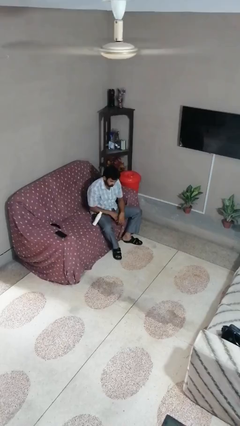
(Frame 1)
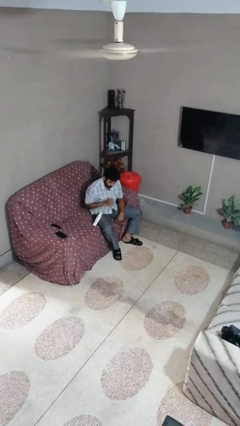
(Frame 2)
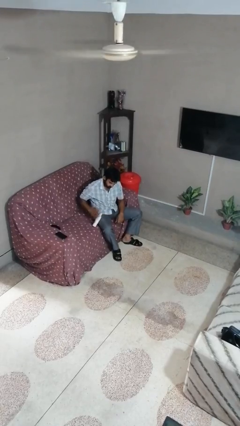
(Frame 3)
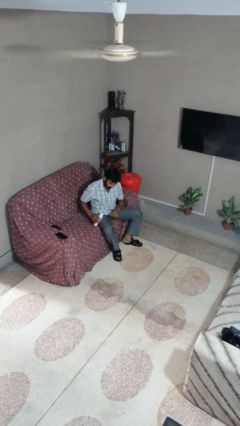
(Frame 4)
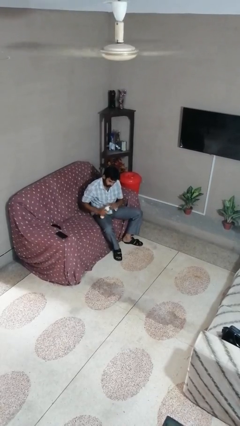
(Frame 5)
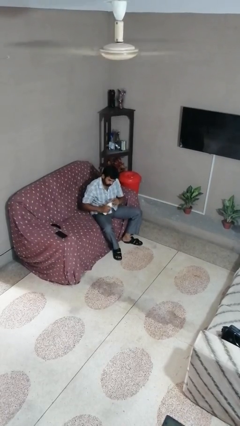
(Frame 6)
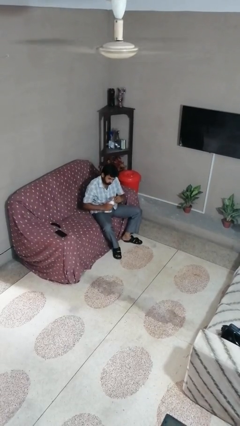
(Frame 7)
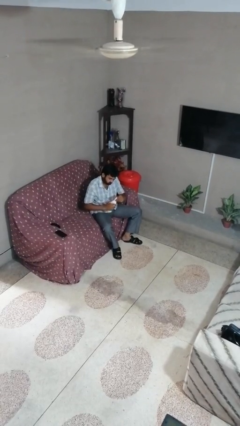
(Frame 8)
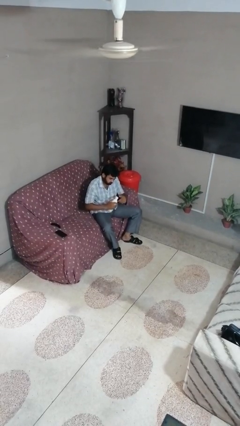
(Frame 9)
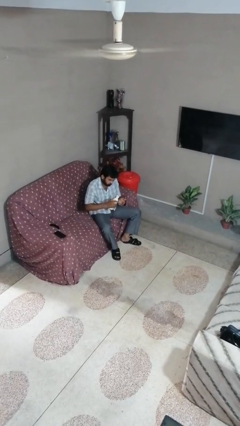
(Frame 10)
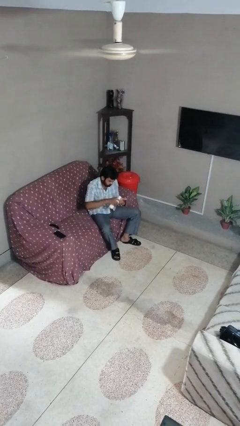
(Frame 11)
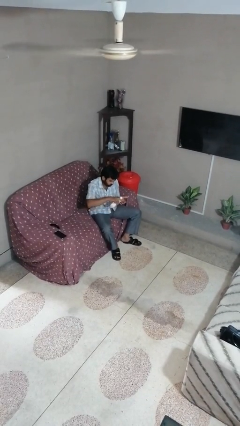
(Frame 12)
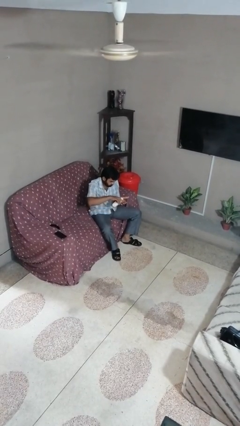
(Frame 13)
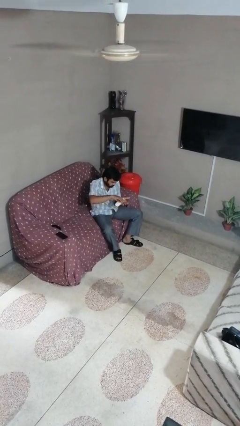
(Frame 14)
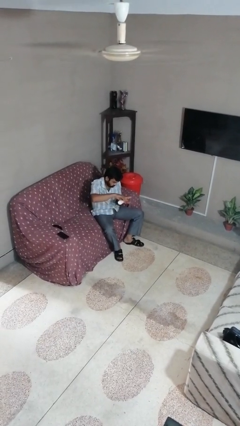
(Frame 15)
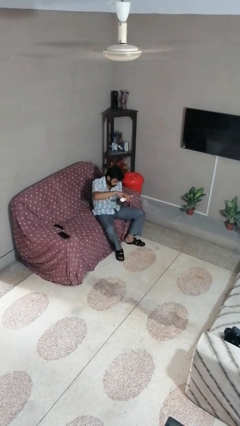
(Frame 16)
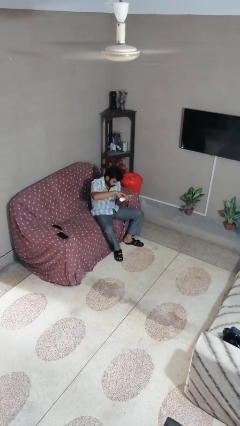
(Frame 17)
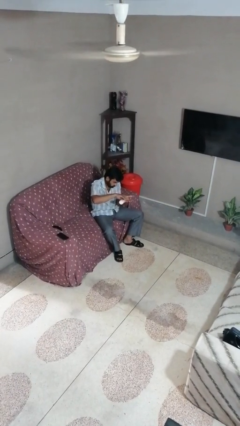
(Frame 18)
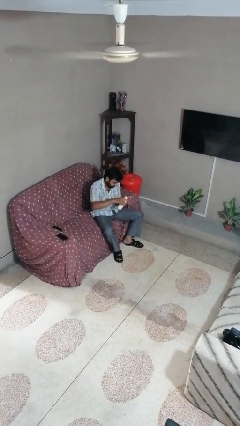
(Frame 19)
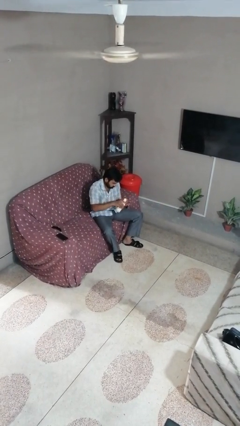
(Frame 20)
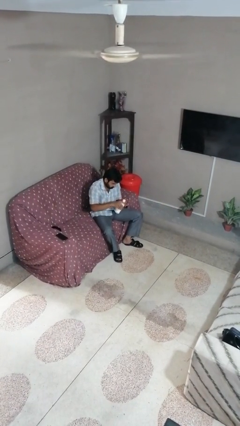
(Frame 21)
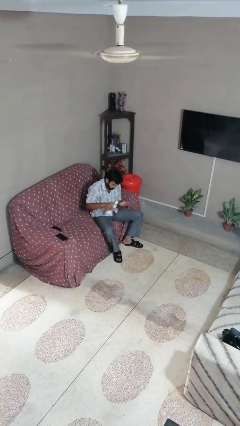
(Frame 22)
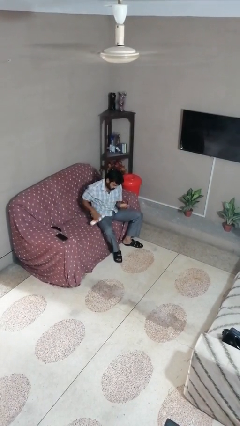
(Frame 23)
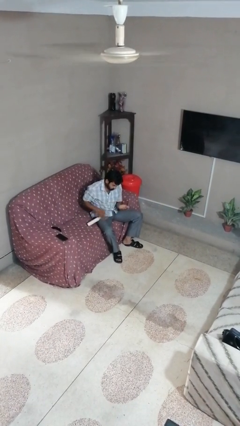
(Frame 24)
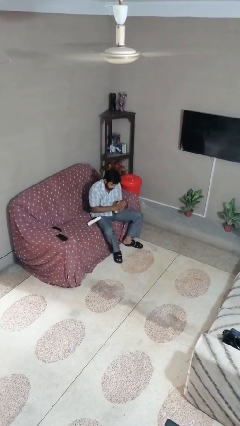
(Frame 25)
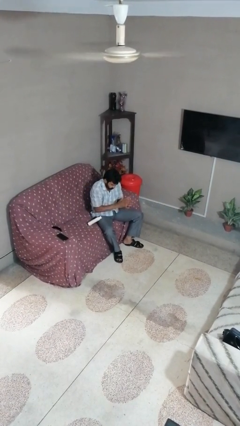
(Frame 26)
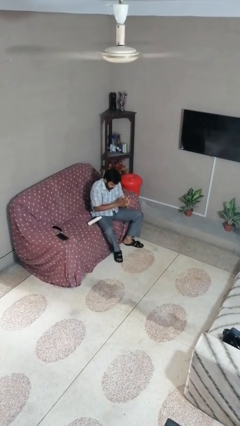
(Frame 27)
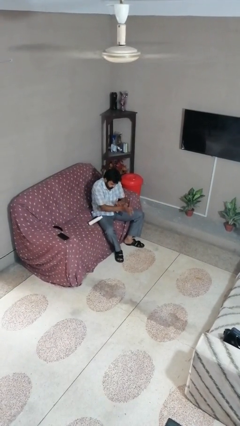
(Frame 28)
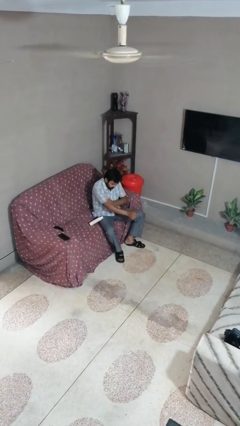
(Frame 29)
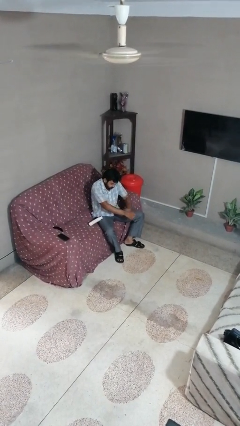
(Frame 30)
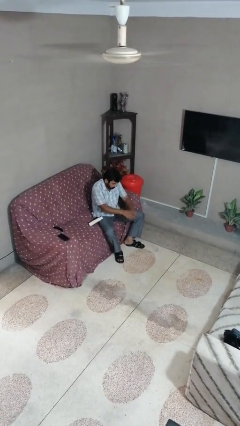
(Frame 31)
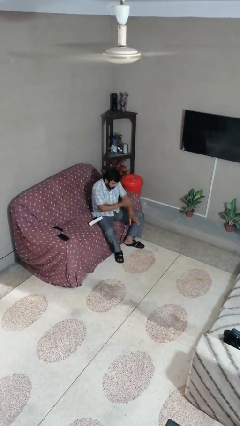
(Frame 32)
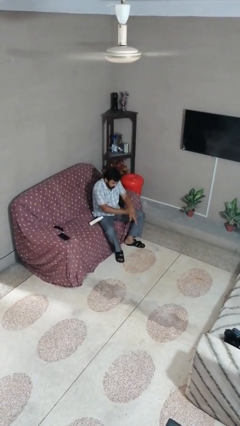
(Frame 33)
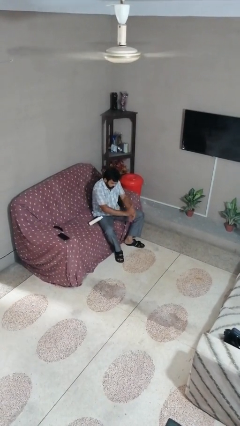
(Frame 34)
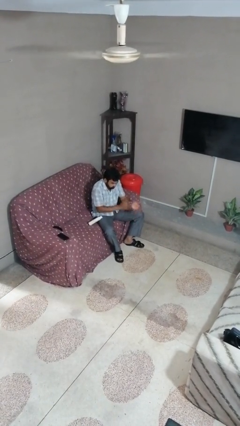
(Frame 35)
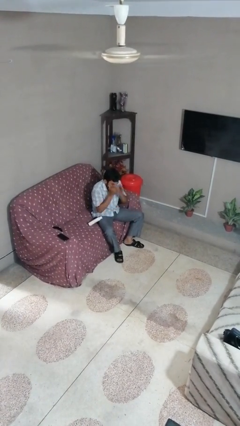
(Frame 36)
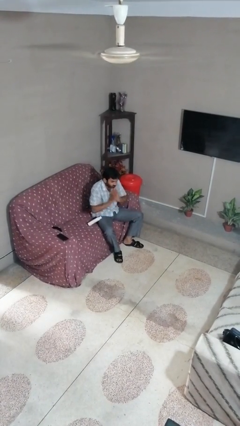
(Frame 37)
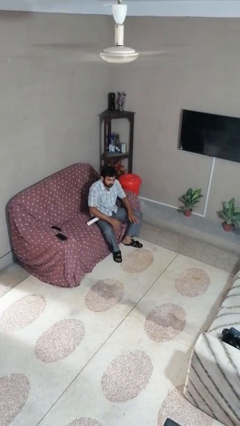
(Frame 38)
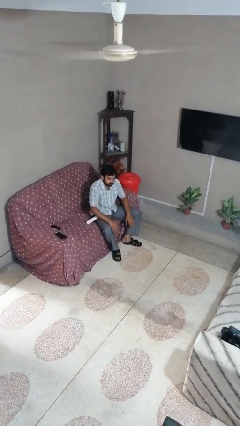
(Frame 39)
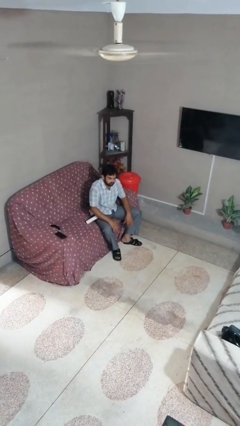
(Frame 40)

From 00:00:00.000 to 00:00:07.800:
person applies sunscreen

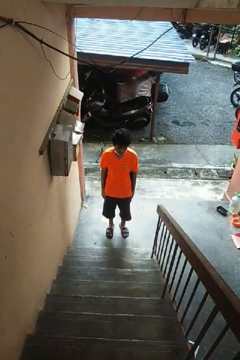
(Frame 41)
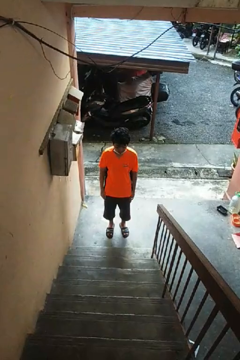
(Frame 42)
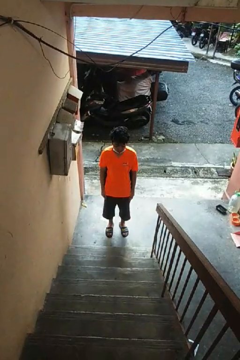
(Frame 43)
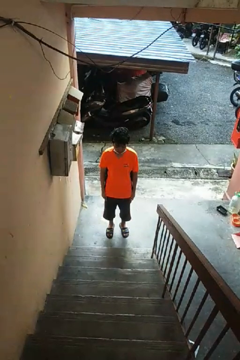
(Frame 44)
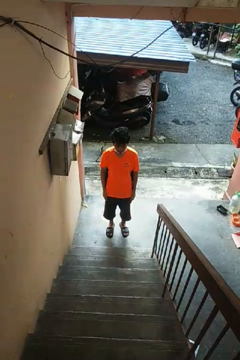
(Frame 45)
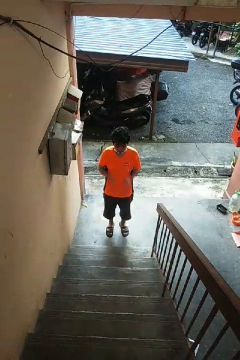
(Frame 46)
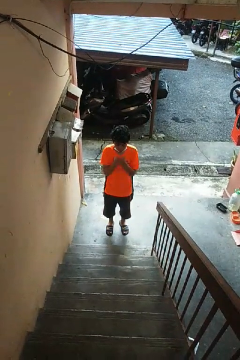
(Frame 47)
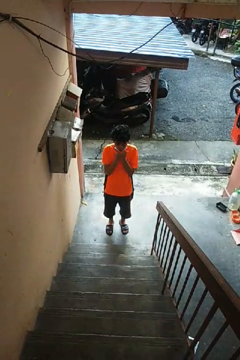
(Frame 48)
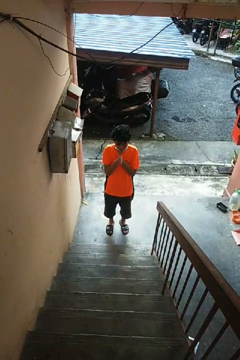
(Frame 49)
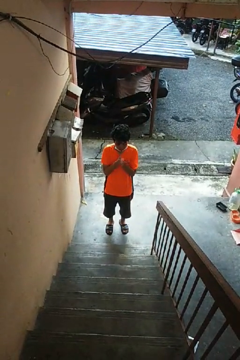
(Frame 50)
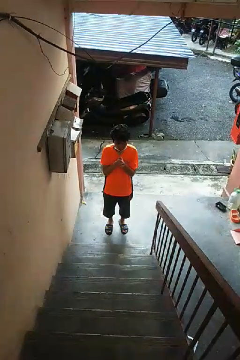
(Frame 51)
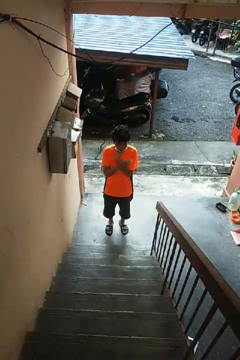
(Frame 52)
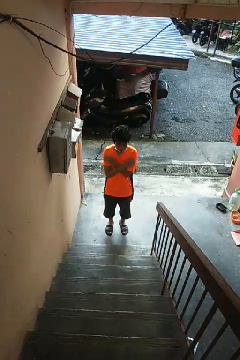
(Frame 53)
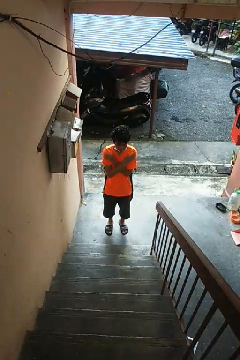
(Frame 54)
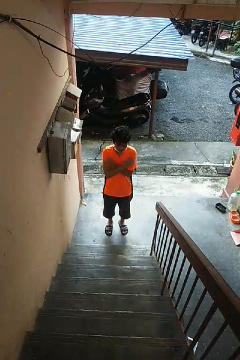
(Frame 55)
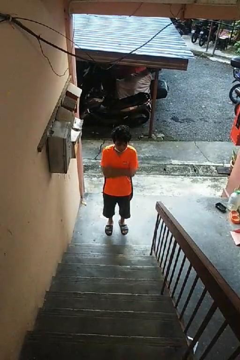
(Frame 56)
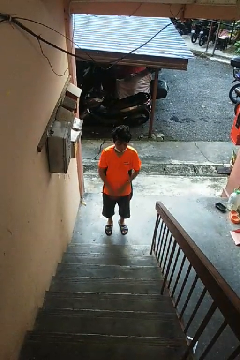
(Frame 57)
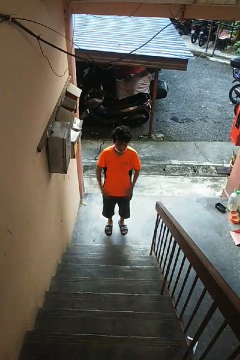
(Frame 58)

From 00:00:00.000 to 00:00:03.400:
person blows into hands

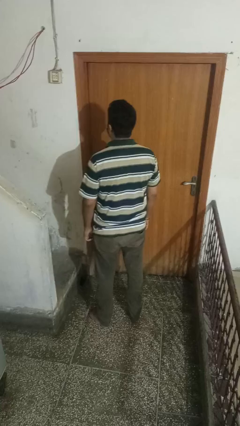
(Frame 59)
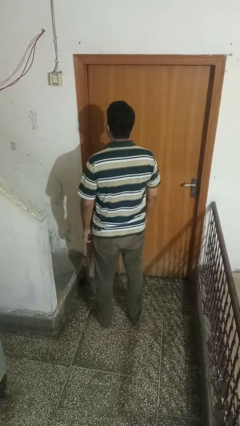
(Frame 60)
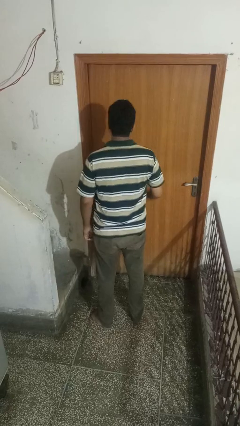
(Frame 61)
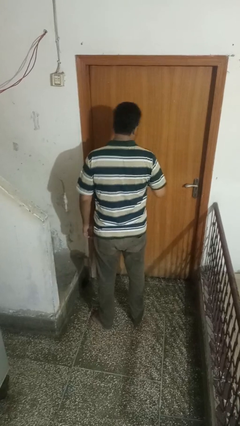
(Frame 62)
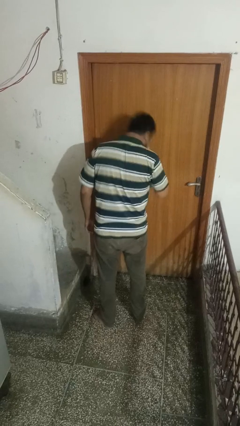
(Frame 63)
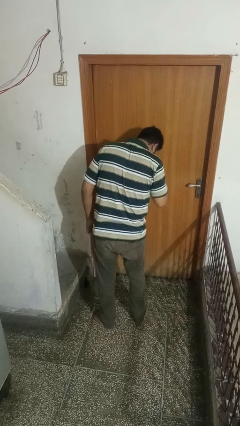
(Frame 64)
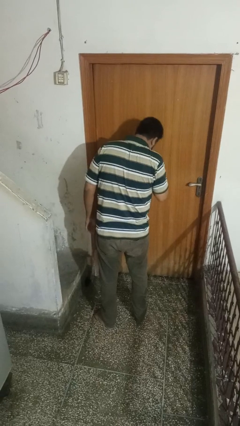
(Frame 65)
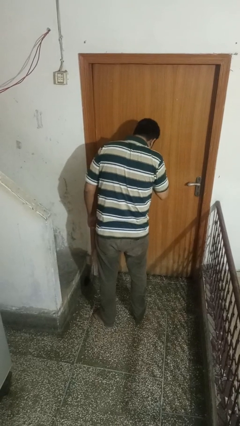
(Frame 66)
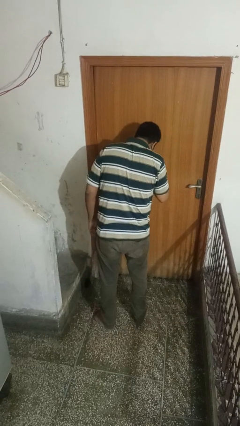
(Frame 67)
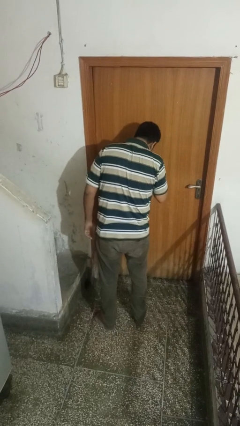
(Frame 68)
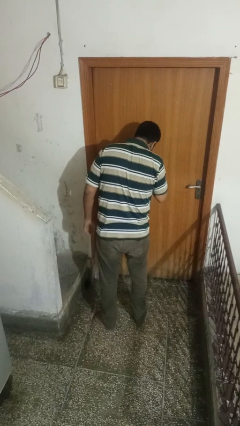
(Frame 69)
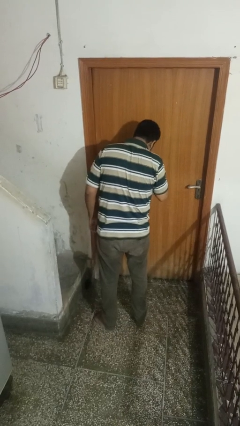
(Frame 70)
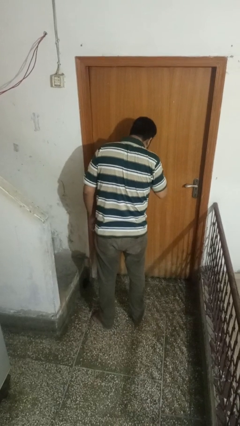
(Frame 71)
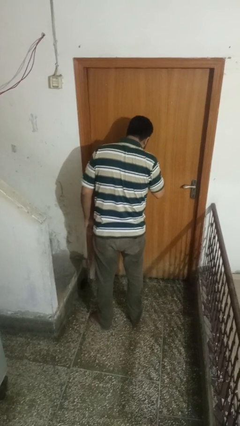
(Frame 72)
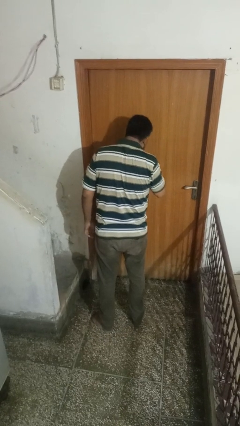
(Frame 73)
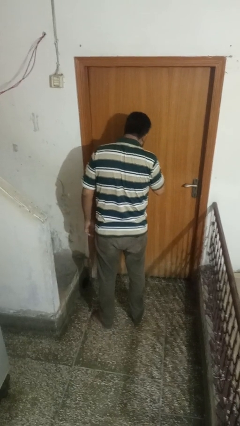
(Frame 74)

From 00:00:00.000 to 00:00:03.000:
person sneezes into hand

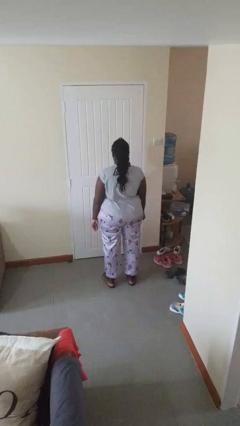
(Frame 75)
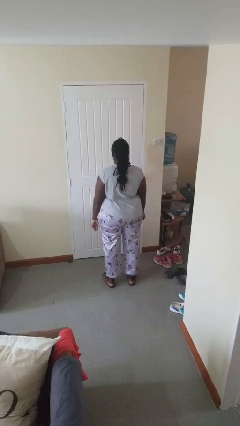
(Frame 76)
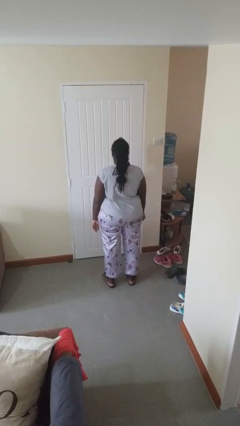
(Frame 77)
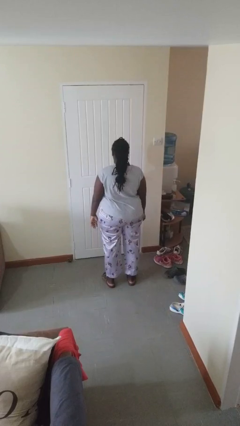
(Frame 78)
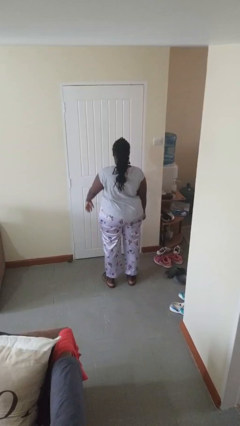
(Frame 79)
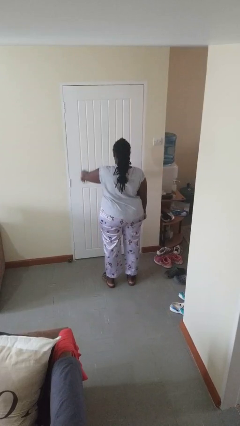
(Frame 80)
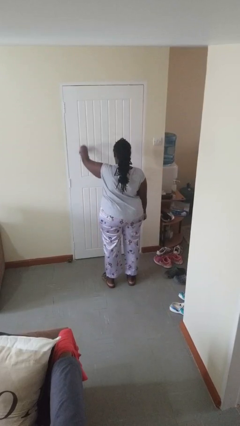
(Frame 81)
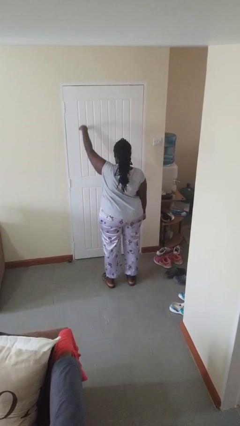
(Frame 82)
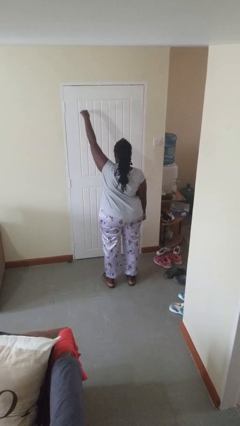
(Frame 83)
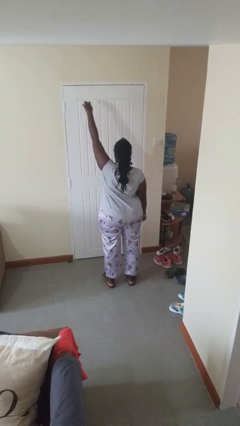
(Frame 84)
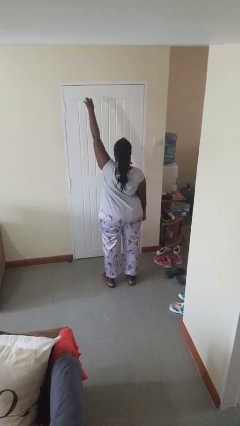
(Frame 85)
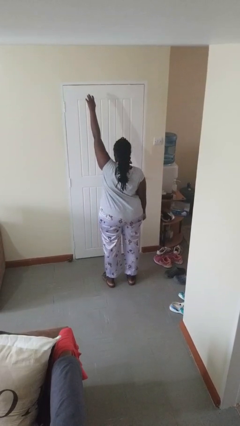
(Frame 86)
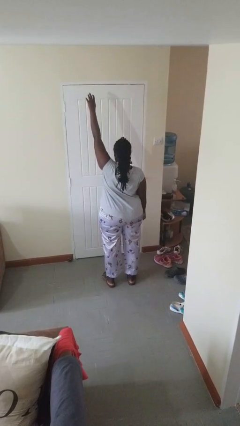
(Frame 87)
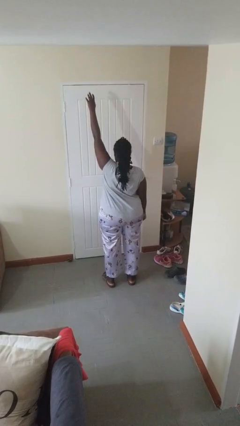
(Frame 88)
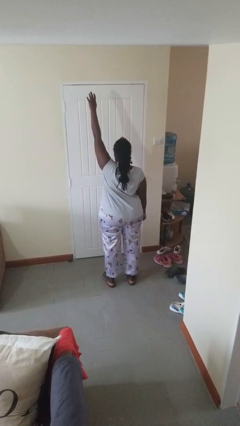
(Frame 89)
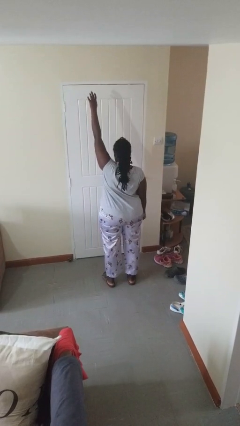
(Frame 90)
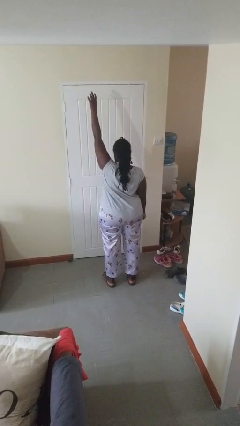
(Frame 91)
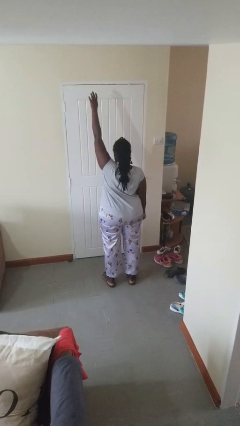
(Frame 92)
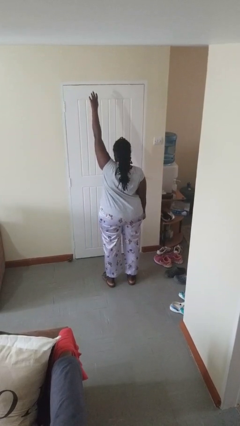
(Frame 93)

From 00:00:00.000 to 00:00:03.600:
person gestures swipe up

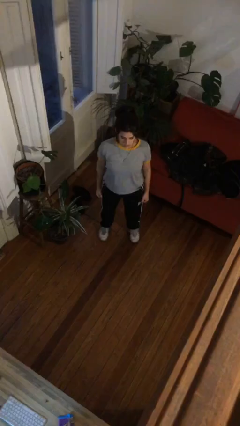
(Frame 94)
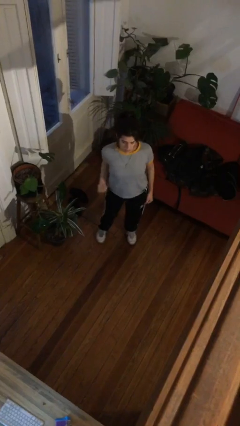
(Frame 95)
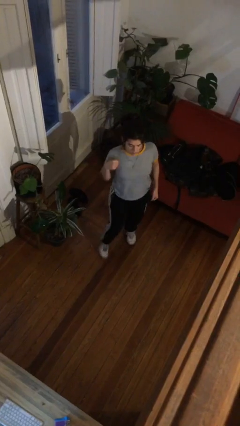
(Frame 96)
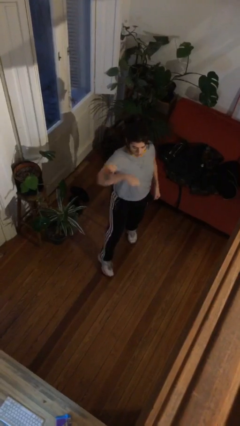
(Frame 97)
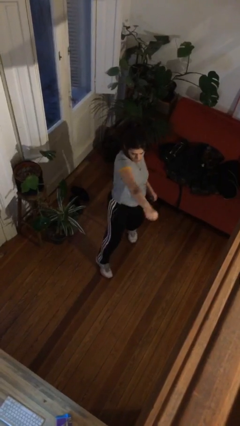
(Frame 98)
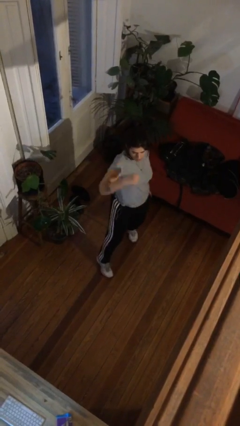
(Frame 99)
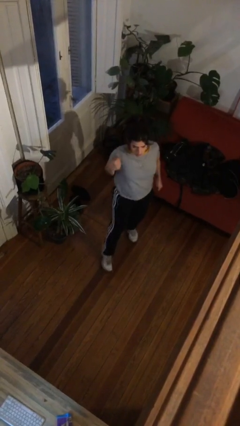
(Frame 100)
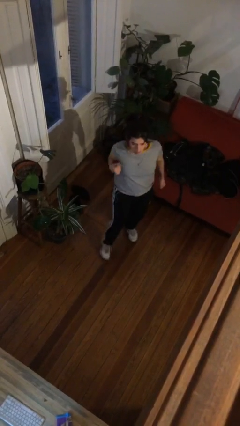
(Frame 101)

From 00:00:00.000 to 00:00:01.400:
person punches
